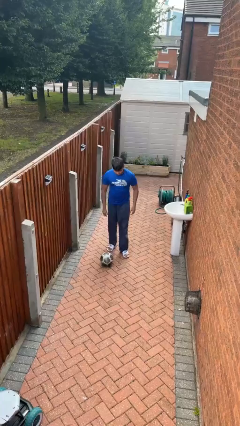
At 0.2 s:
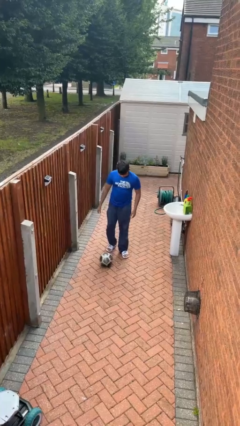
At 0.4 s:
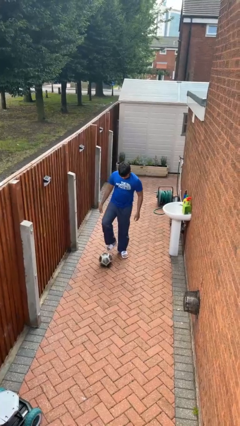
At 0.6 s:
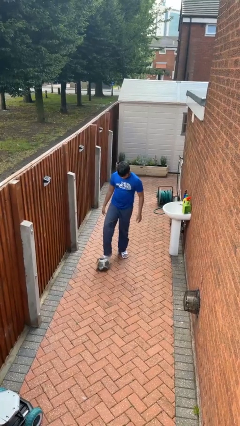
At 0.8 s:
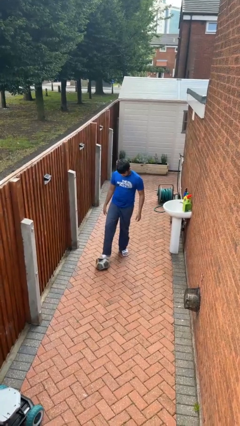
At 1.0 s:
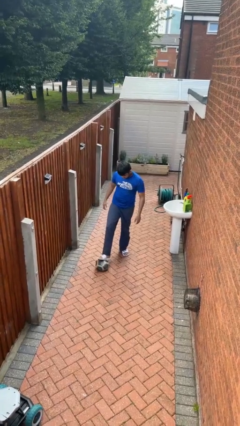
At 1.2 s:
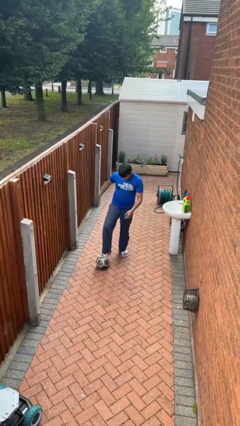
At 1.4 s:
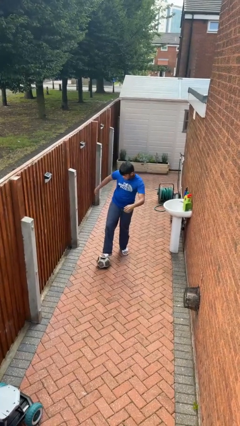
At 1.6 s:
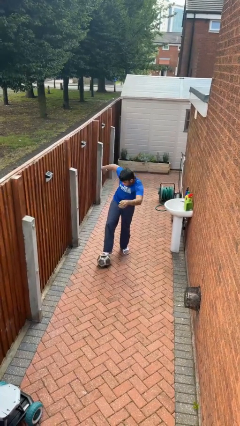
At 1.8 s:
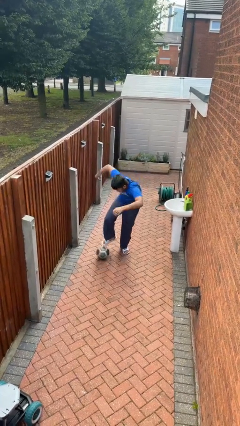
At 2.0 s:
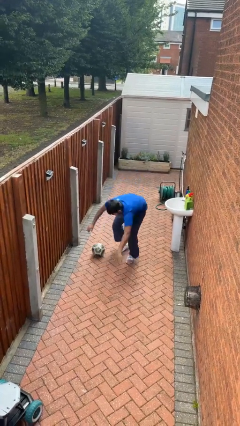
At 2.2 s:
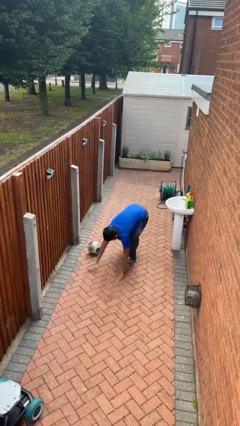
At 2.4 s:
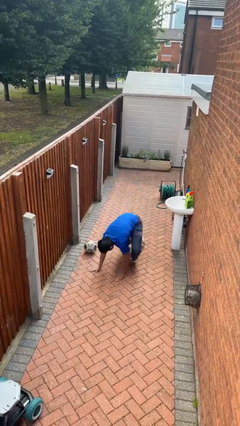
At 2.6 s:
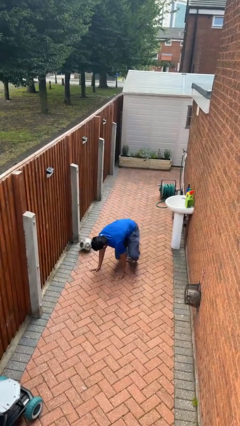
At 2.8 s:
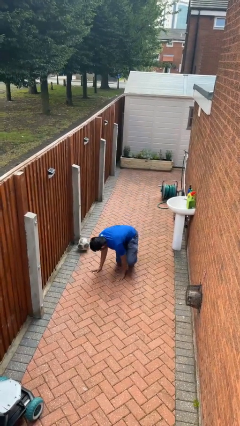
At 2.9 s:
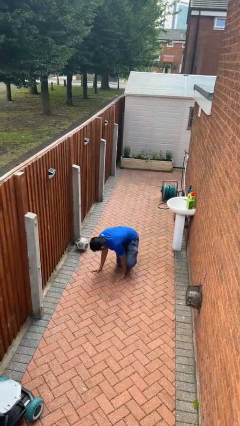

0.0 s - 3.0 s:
person trips on object on floor

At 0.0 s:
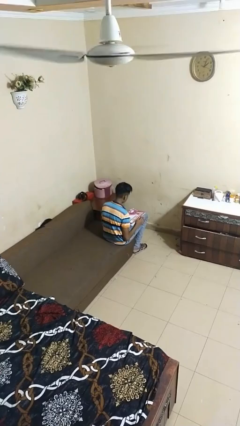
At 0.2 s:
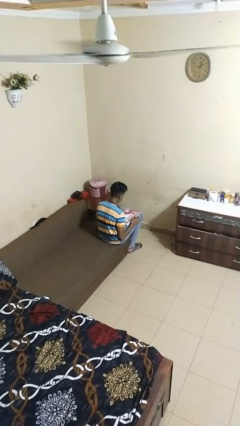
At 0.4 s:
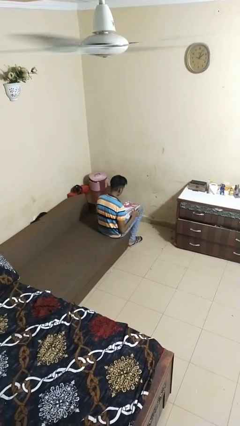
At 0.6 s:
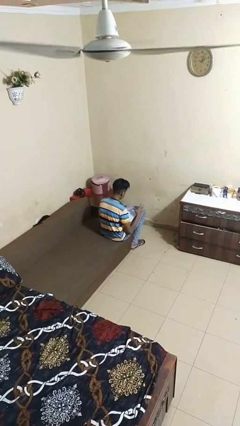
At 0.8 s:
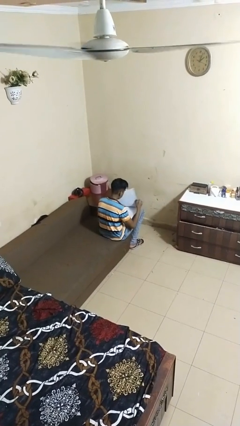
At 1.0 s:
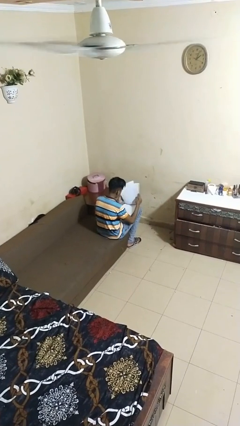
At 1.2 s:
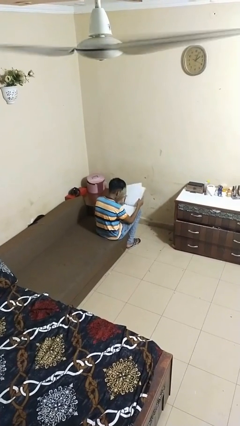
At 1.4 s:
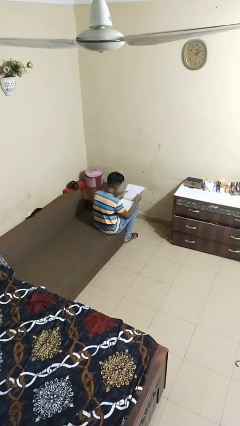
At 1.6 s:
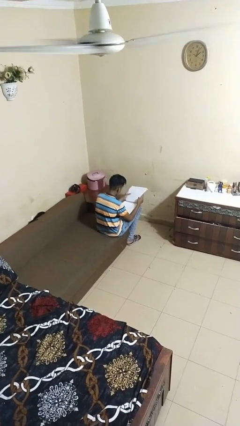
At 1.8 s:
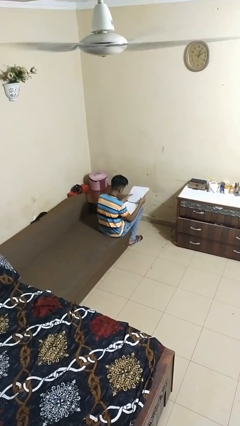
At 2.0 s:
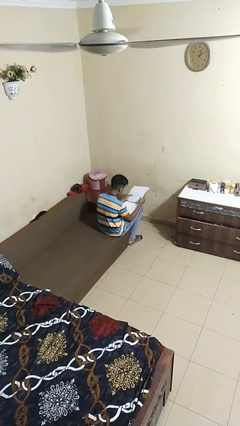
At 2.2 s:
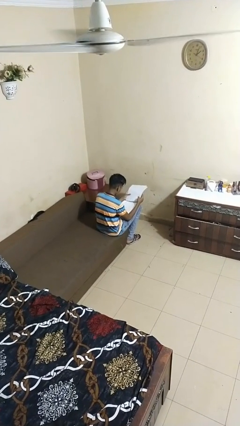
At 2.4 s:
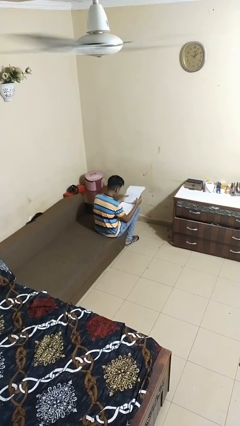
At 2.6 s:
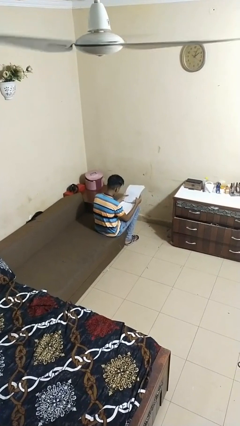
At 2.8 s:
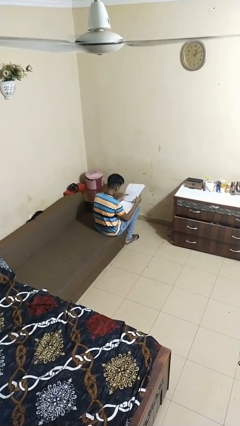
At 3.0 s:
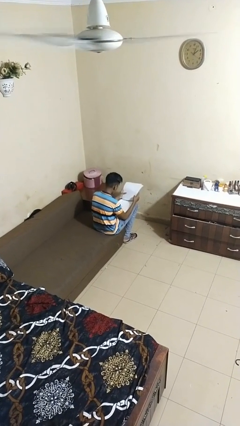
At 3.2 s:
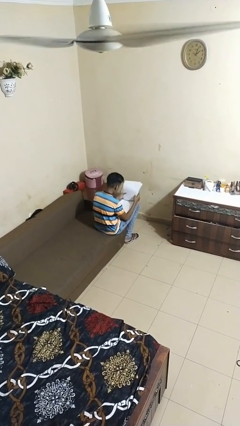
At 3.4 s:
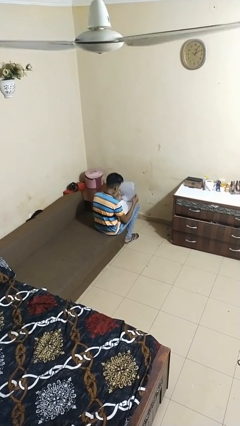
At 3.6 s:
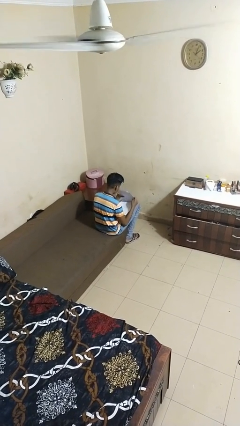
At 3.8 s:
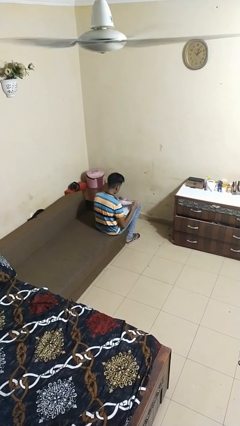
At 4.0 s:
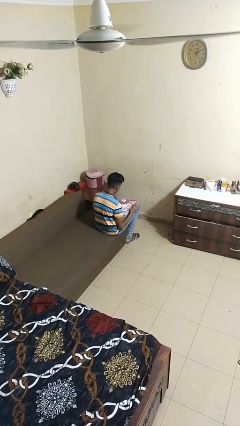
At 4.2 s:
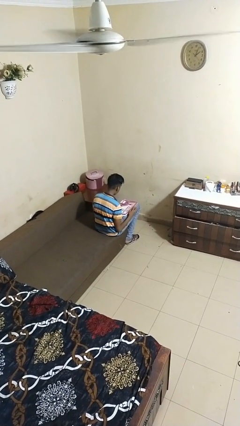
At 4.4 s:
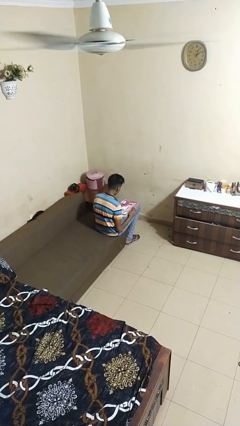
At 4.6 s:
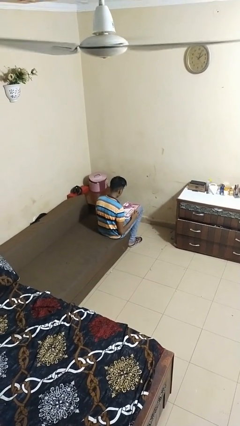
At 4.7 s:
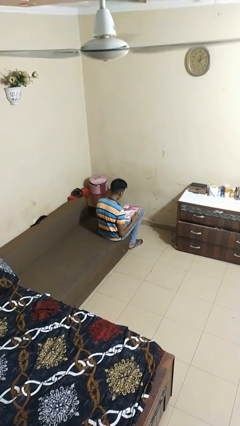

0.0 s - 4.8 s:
person reads magazine

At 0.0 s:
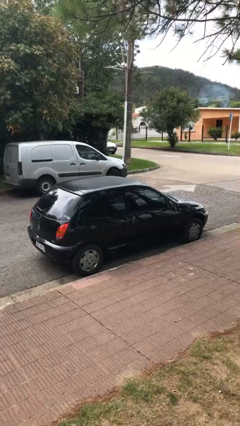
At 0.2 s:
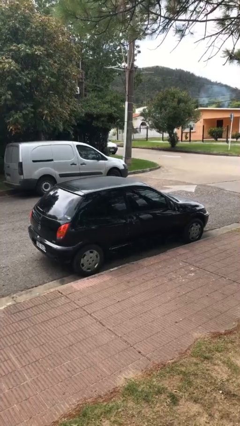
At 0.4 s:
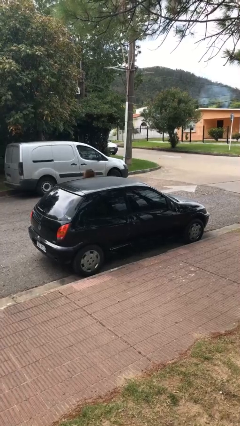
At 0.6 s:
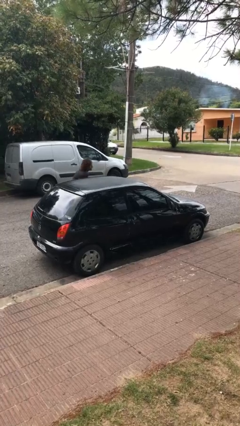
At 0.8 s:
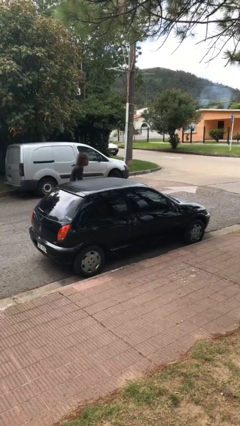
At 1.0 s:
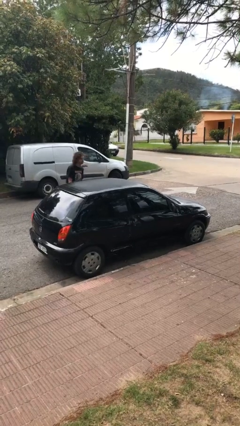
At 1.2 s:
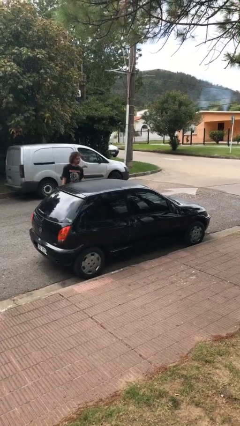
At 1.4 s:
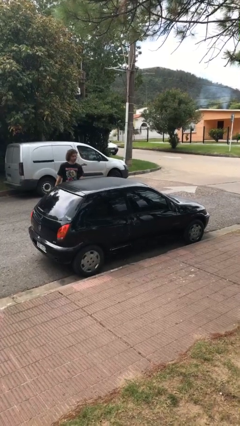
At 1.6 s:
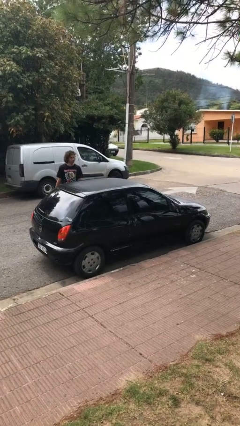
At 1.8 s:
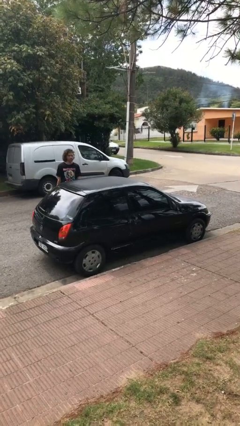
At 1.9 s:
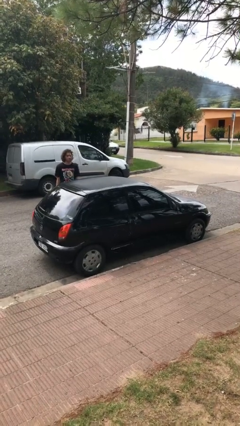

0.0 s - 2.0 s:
car drops off person

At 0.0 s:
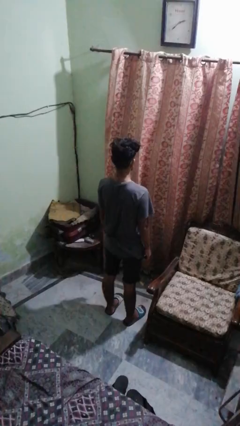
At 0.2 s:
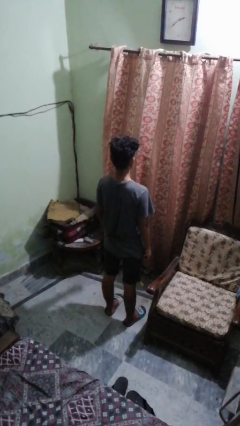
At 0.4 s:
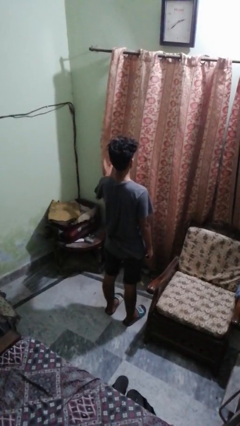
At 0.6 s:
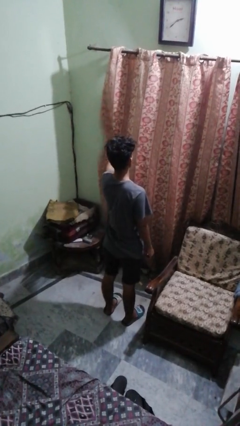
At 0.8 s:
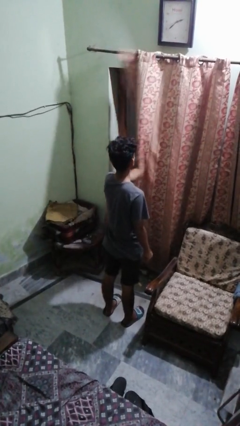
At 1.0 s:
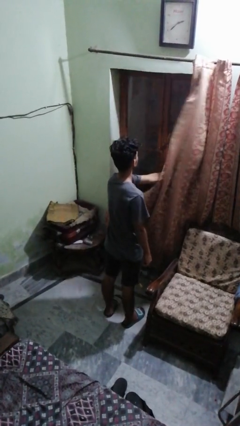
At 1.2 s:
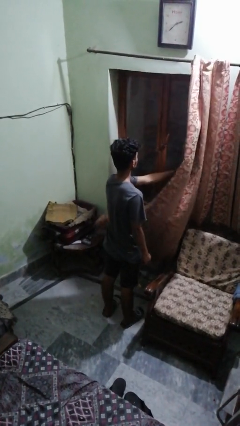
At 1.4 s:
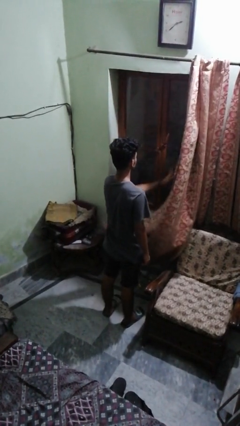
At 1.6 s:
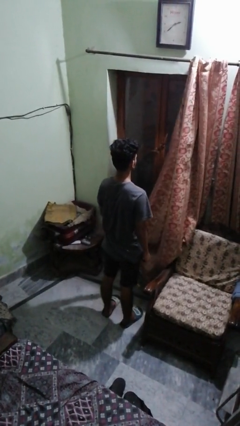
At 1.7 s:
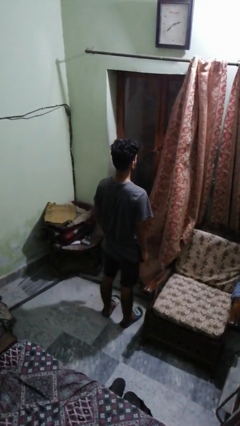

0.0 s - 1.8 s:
person opens curtains

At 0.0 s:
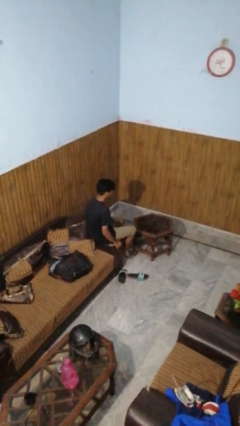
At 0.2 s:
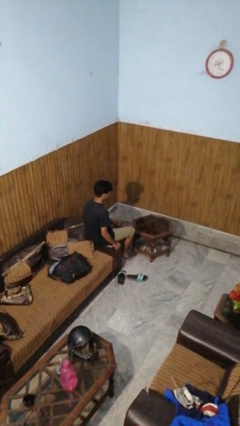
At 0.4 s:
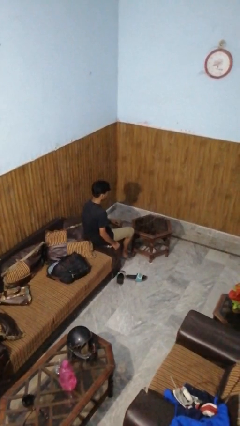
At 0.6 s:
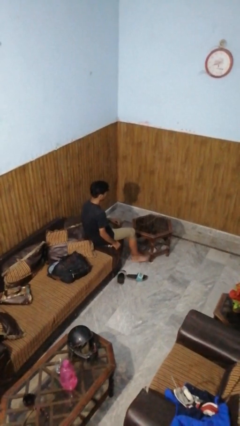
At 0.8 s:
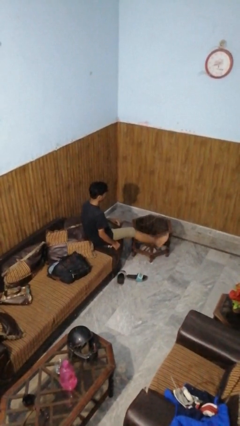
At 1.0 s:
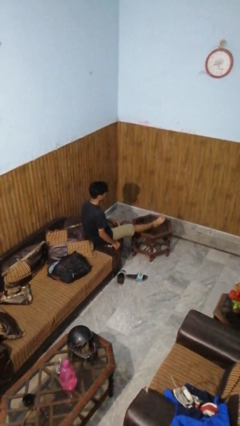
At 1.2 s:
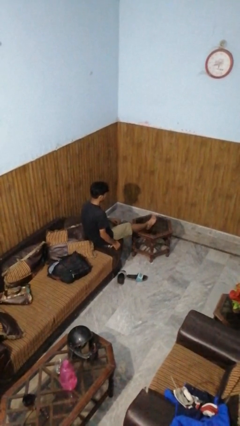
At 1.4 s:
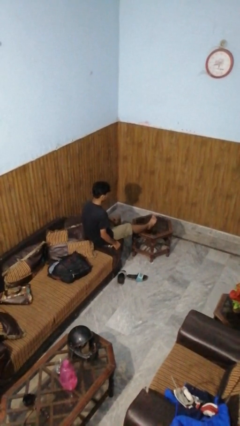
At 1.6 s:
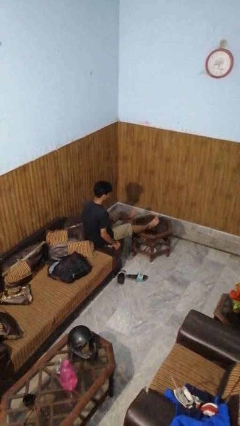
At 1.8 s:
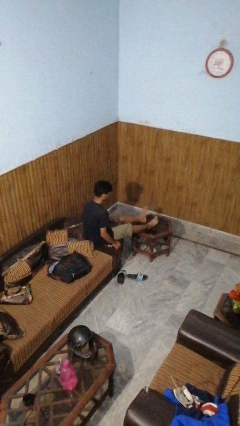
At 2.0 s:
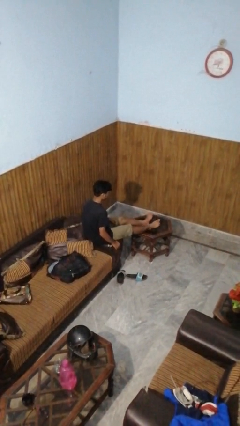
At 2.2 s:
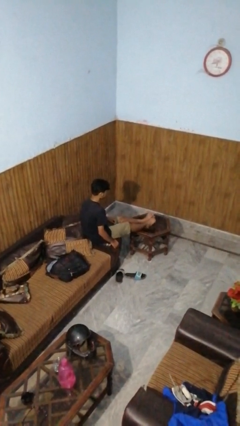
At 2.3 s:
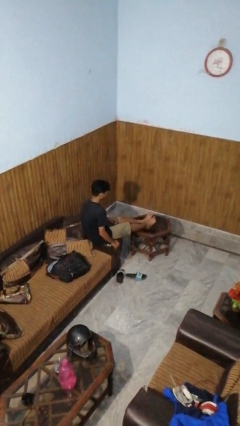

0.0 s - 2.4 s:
person puts feet up

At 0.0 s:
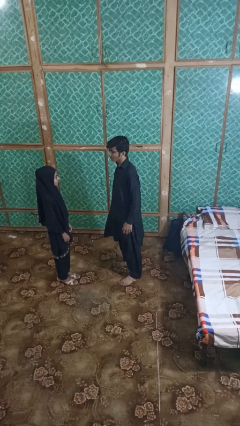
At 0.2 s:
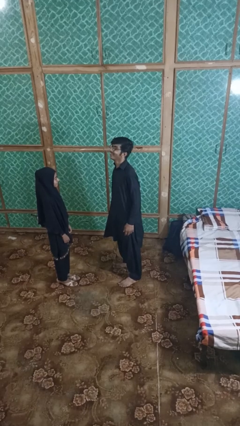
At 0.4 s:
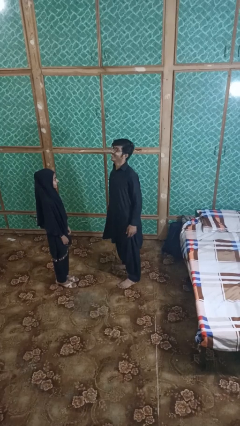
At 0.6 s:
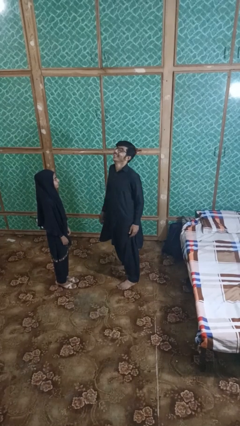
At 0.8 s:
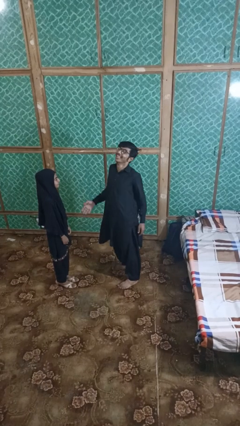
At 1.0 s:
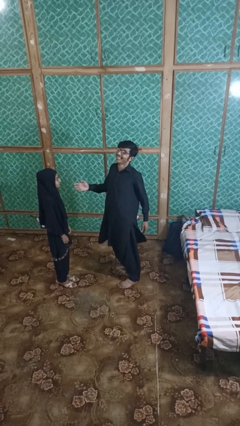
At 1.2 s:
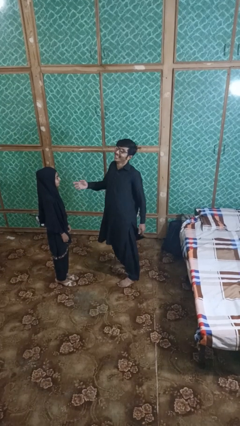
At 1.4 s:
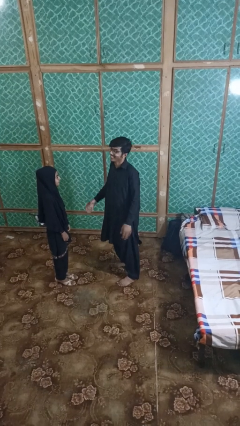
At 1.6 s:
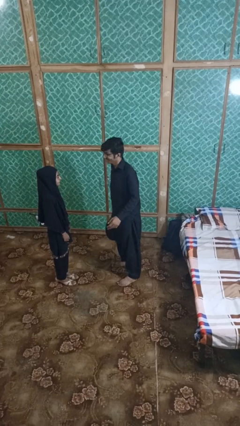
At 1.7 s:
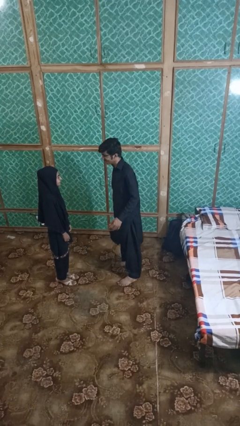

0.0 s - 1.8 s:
person laughs with person

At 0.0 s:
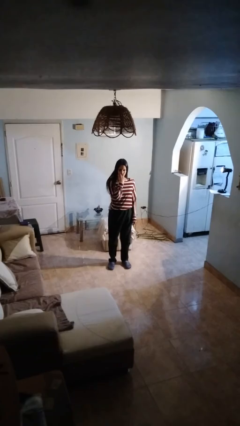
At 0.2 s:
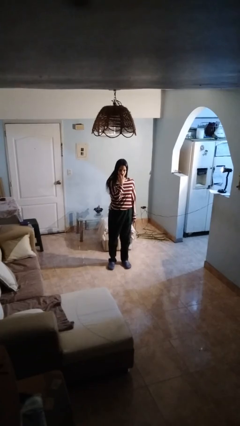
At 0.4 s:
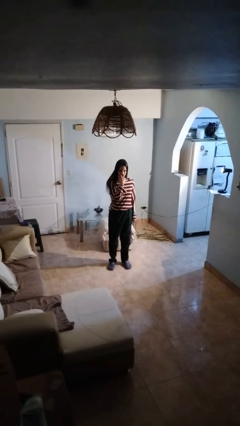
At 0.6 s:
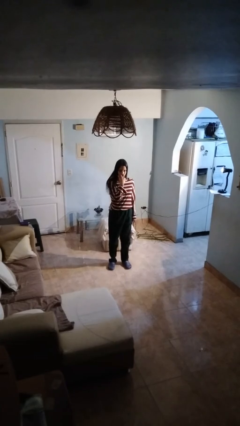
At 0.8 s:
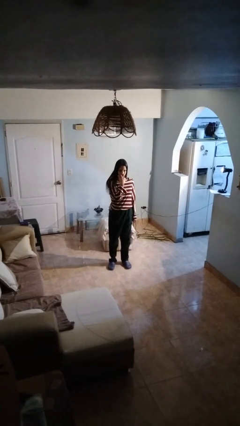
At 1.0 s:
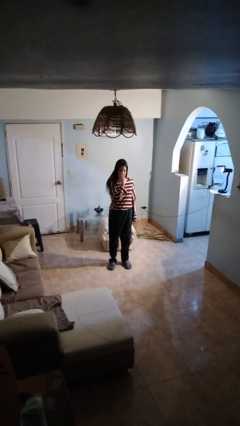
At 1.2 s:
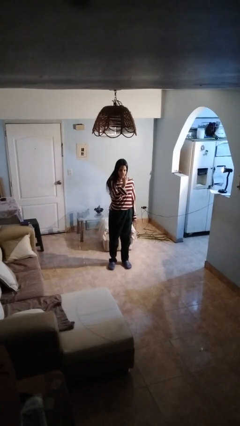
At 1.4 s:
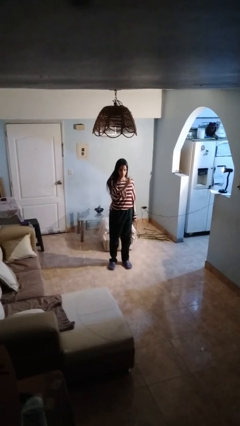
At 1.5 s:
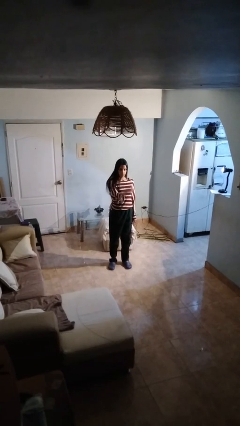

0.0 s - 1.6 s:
person gestures watch closely
